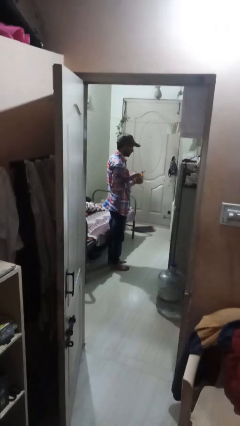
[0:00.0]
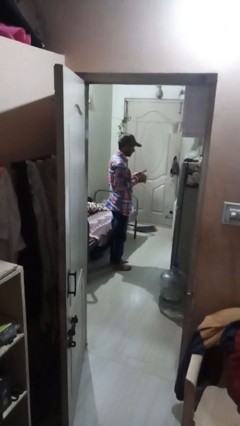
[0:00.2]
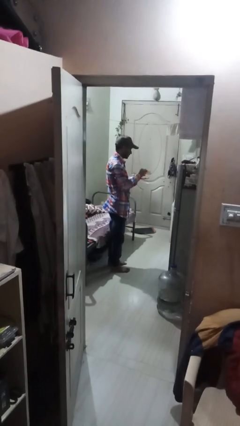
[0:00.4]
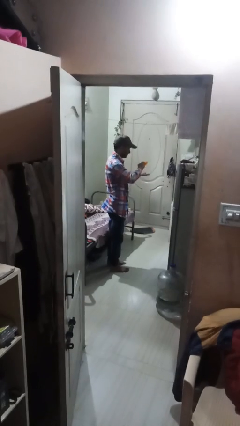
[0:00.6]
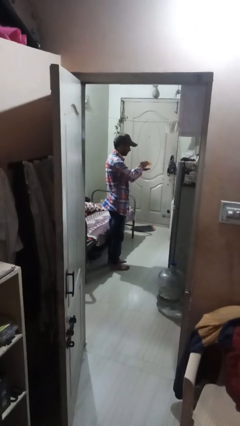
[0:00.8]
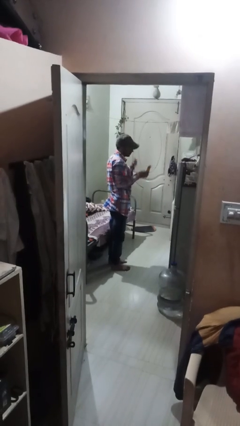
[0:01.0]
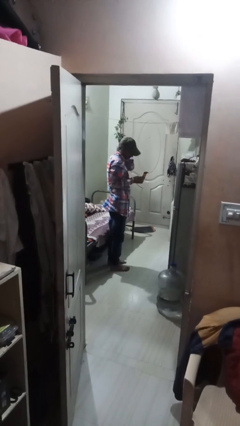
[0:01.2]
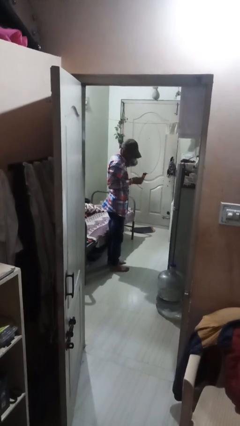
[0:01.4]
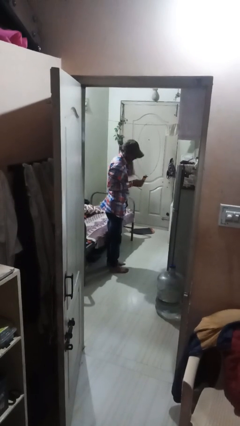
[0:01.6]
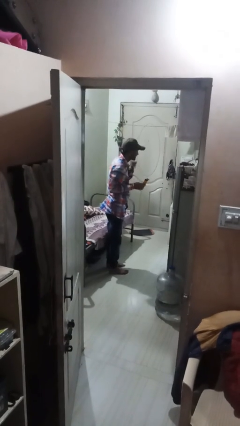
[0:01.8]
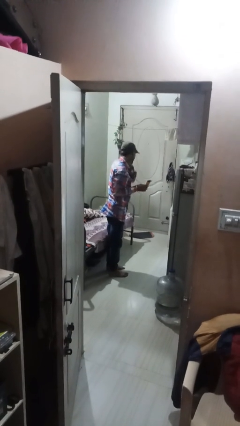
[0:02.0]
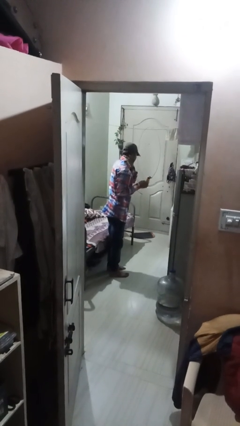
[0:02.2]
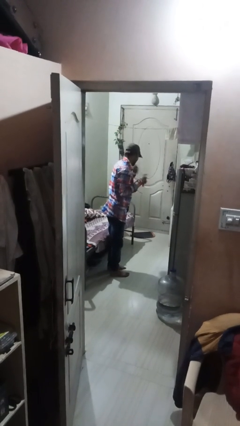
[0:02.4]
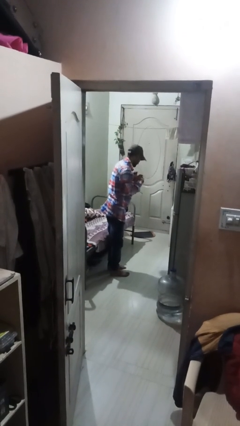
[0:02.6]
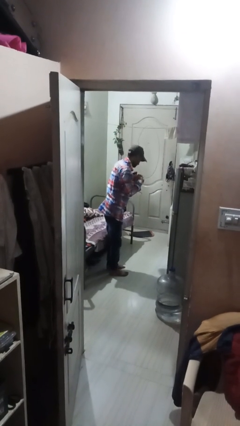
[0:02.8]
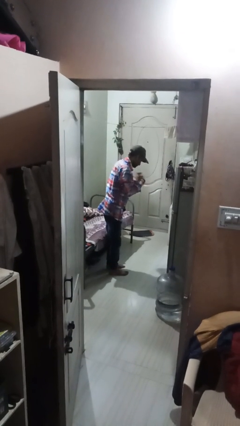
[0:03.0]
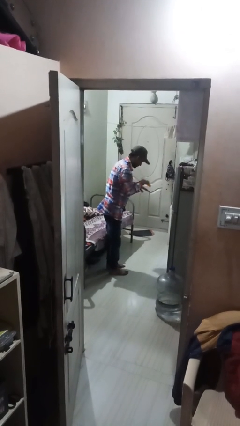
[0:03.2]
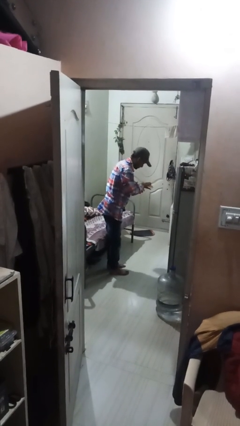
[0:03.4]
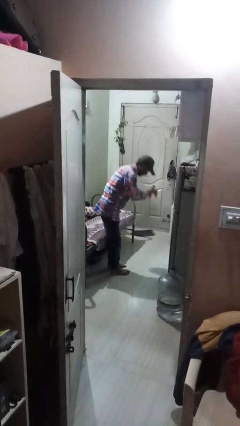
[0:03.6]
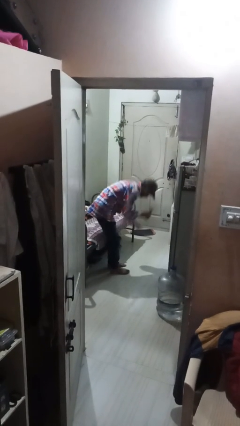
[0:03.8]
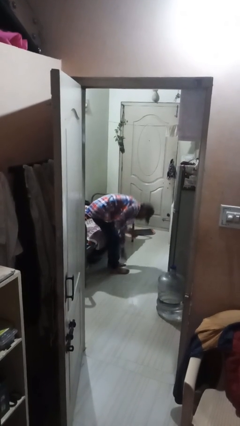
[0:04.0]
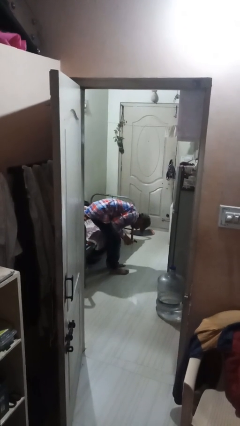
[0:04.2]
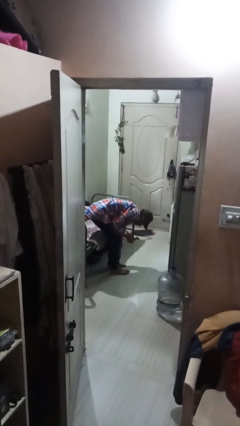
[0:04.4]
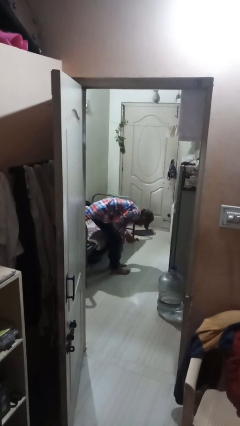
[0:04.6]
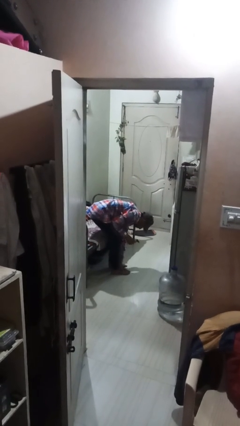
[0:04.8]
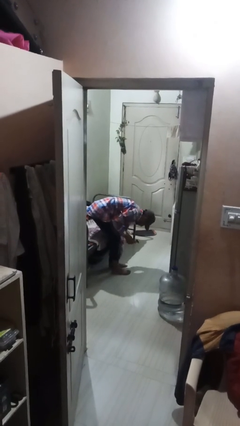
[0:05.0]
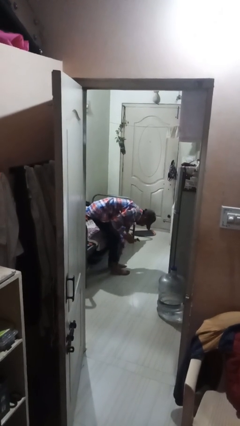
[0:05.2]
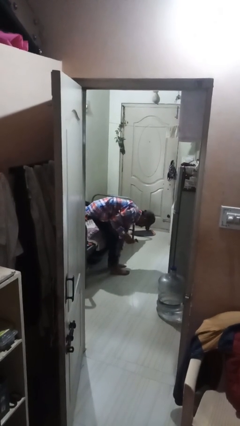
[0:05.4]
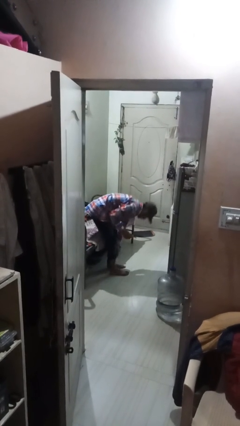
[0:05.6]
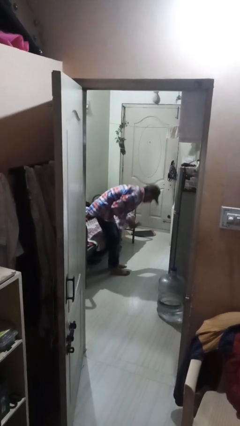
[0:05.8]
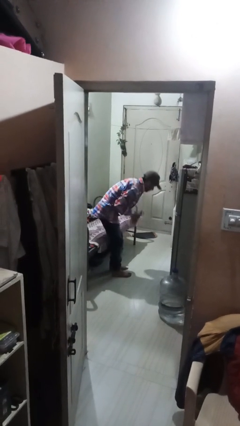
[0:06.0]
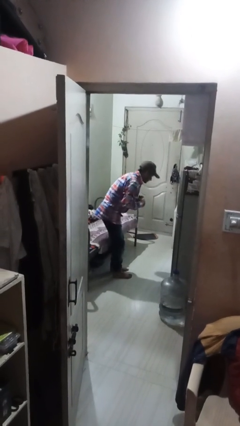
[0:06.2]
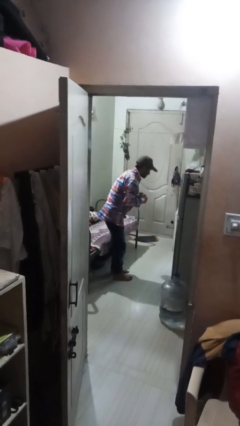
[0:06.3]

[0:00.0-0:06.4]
person applies sunscreen

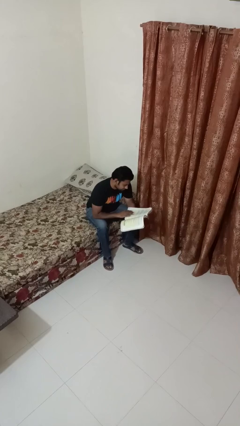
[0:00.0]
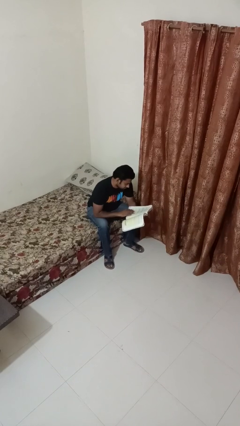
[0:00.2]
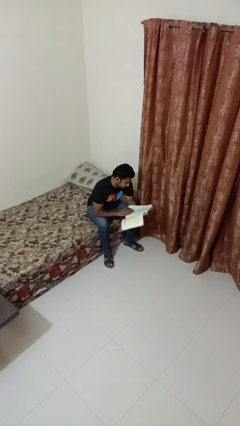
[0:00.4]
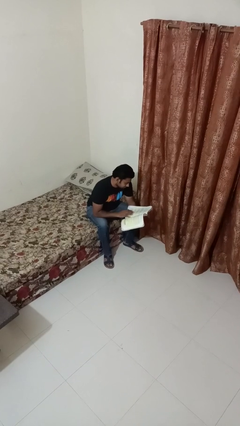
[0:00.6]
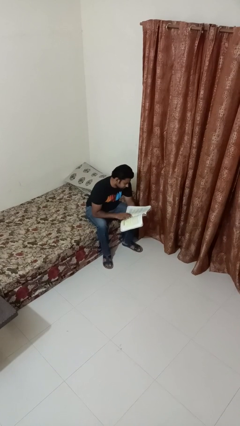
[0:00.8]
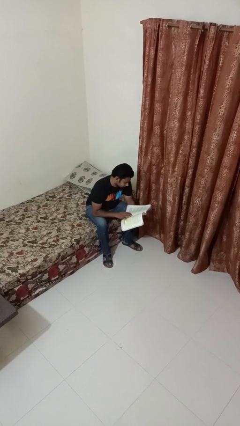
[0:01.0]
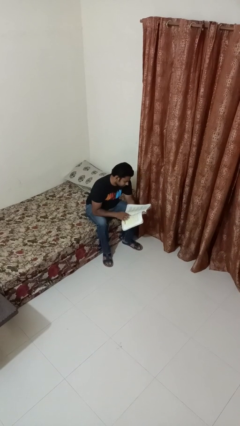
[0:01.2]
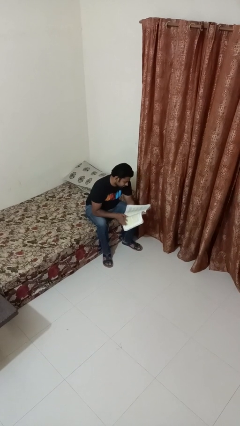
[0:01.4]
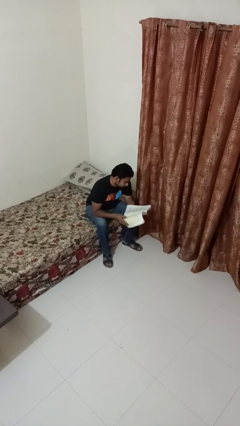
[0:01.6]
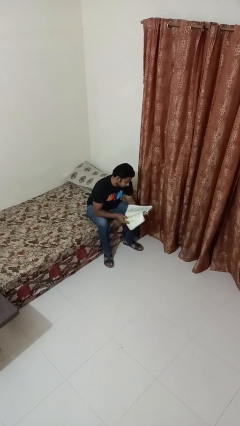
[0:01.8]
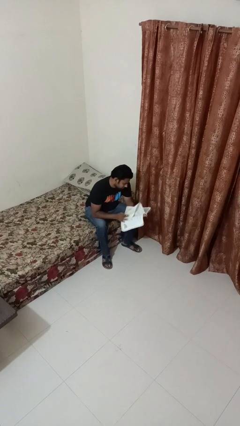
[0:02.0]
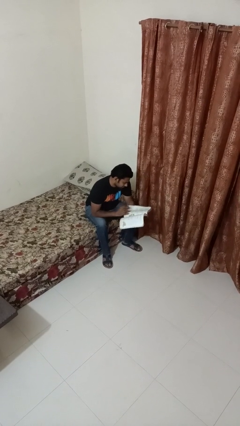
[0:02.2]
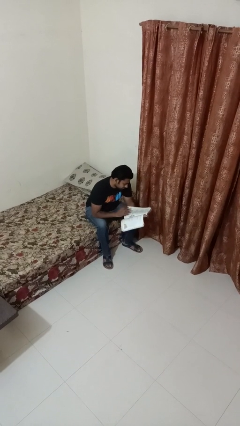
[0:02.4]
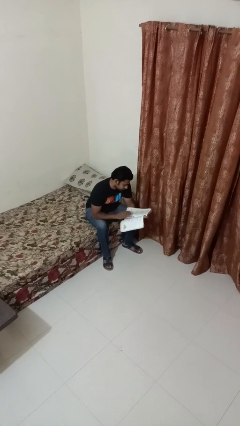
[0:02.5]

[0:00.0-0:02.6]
person reads book

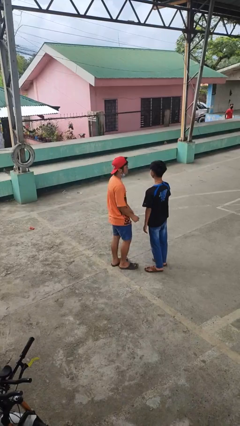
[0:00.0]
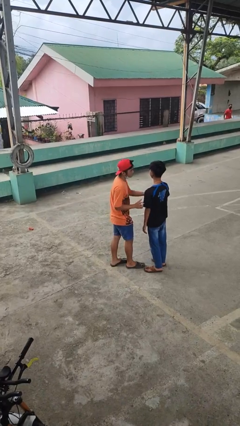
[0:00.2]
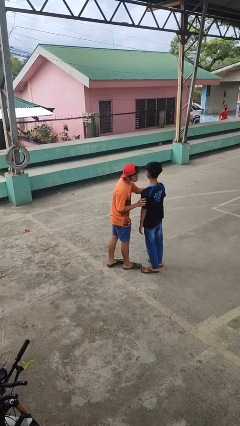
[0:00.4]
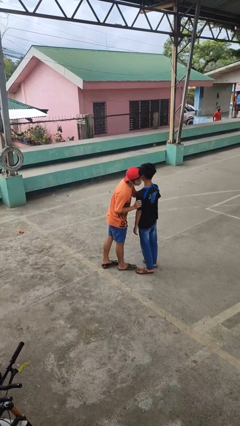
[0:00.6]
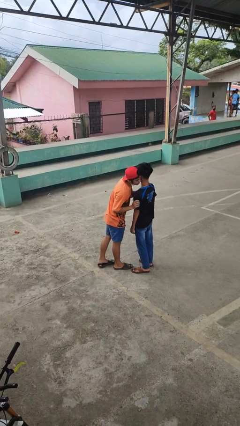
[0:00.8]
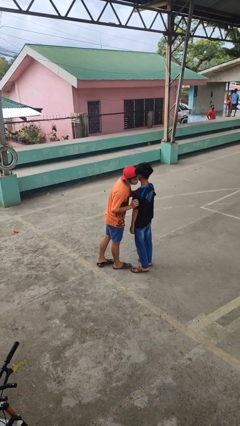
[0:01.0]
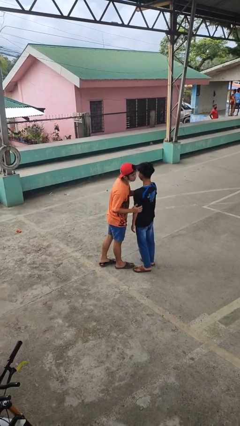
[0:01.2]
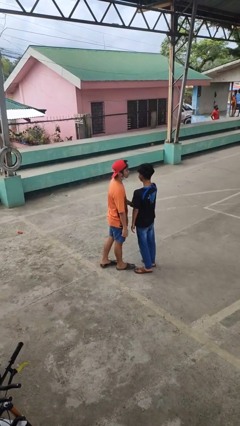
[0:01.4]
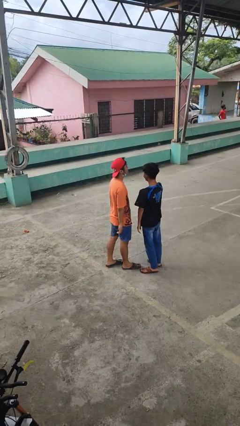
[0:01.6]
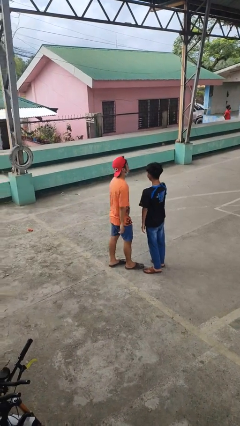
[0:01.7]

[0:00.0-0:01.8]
person kisses cheek of person

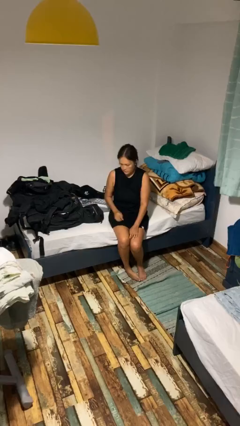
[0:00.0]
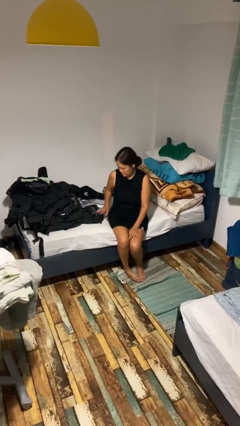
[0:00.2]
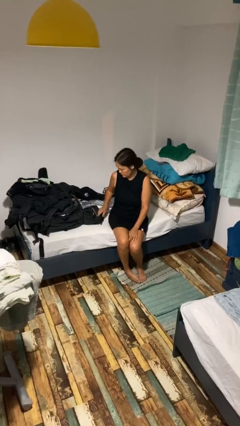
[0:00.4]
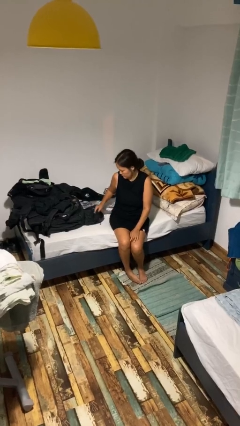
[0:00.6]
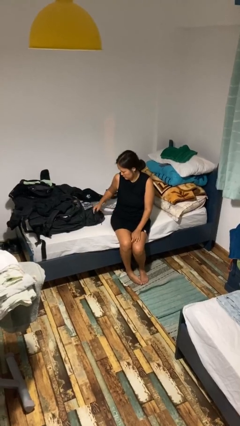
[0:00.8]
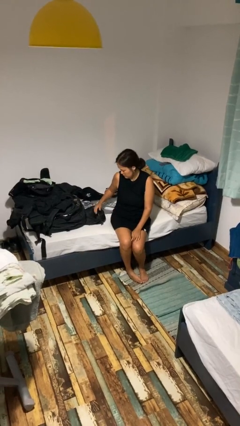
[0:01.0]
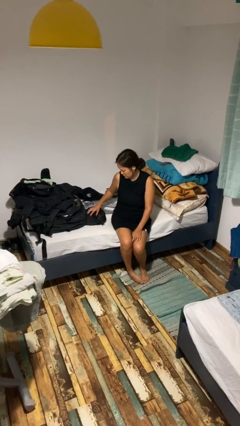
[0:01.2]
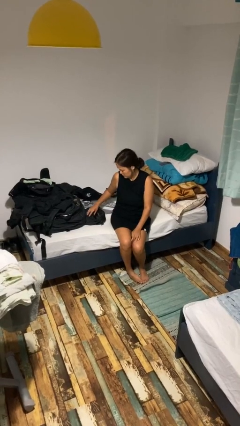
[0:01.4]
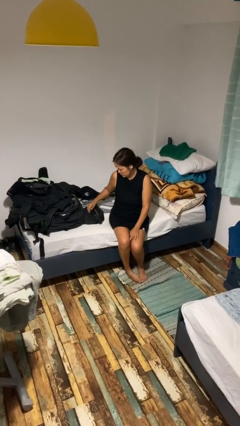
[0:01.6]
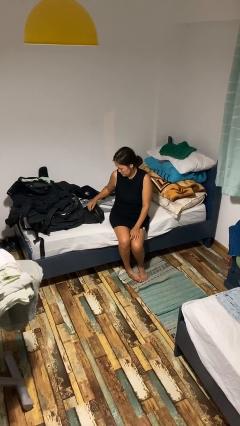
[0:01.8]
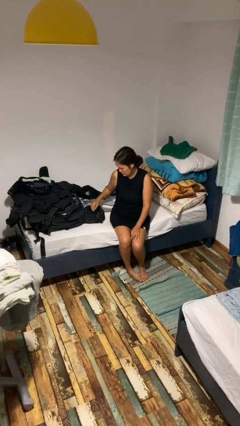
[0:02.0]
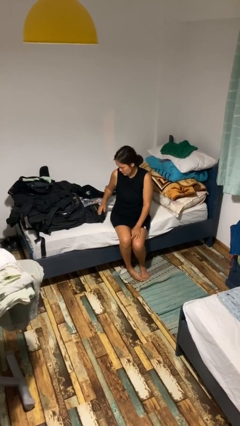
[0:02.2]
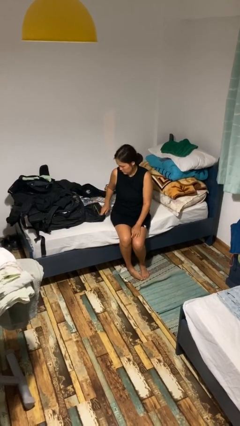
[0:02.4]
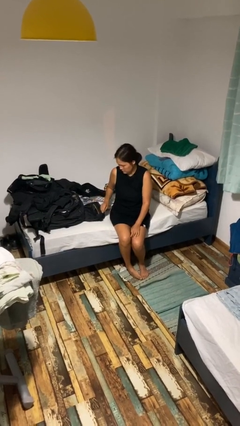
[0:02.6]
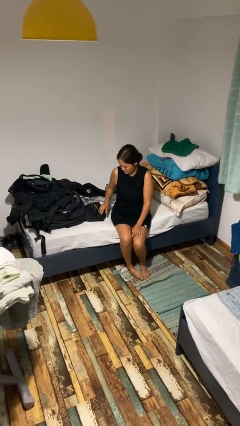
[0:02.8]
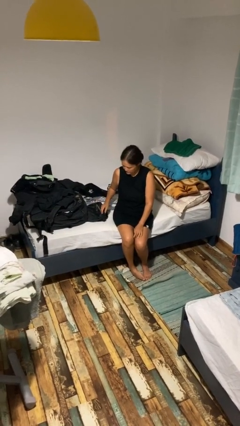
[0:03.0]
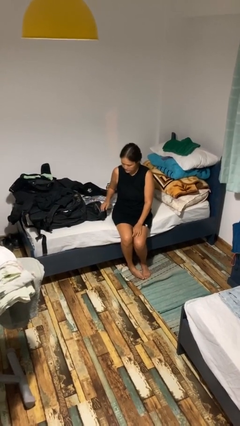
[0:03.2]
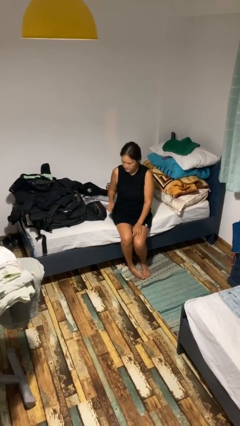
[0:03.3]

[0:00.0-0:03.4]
person taps object with finger

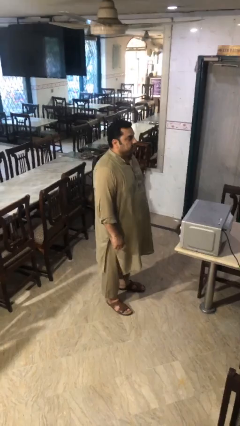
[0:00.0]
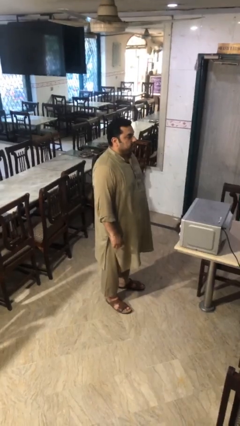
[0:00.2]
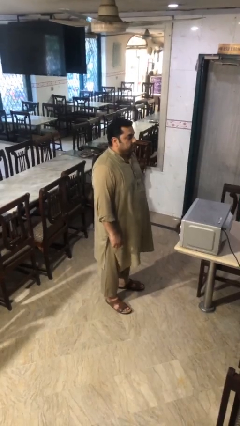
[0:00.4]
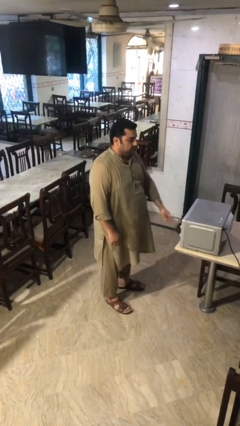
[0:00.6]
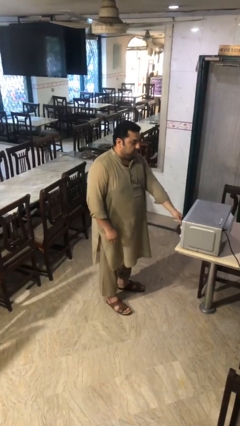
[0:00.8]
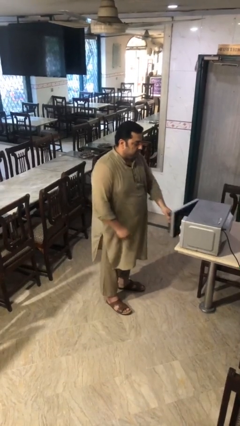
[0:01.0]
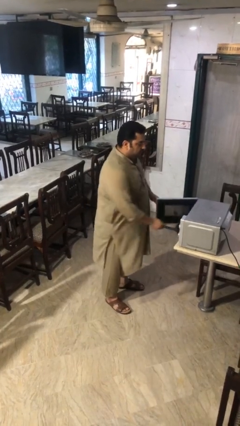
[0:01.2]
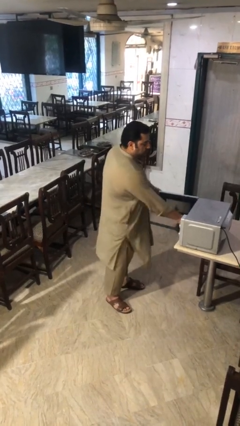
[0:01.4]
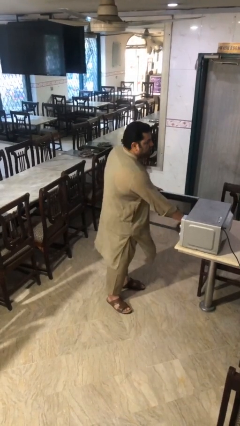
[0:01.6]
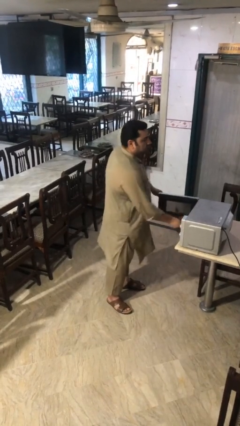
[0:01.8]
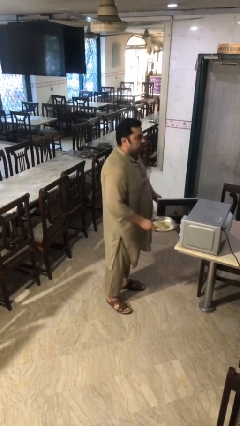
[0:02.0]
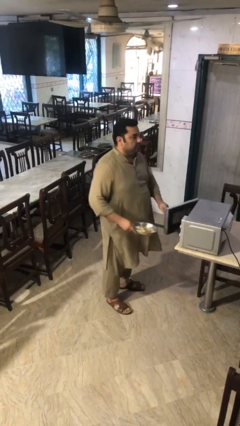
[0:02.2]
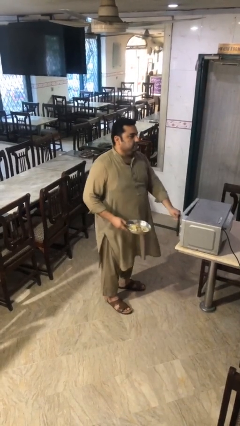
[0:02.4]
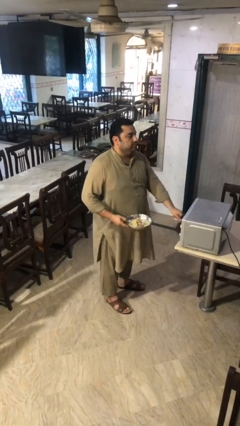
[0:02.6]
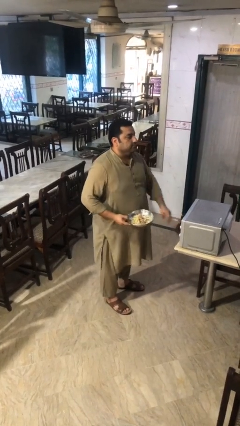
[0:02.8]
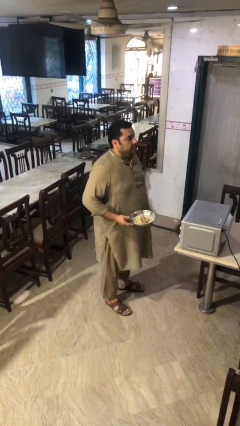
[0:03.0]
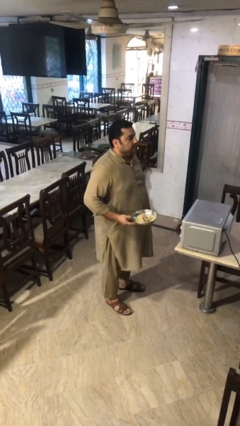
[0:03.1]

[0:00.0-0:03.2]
person takes object from microwave
